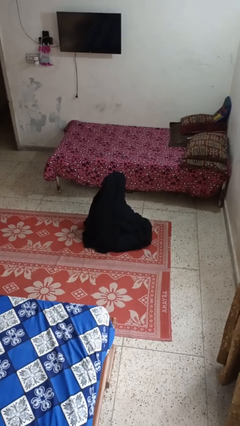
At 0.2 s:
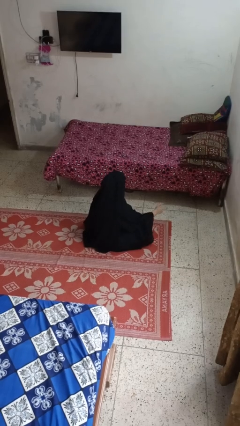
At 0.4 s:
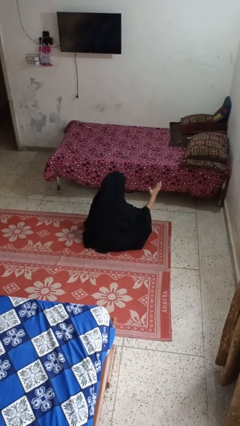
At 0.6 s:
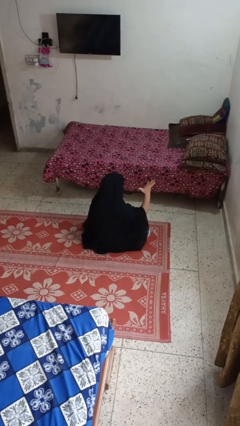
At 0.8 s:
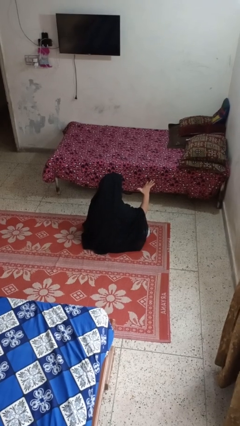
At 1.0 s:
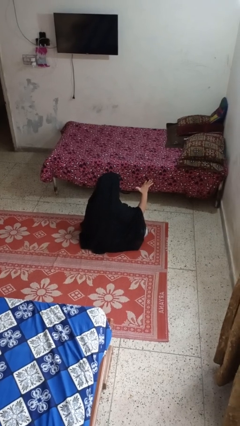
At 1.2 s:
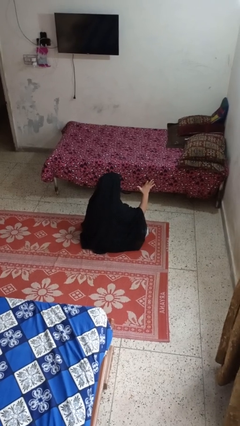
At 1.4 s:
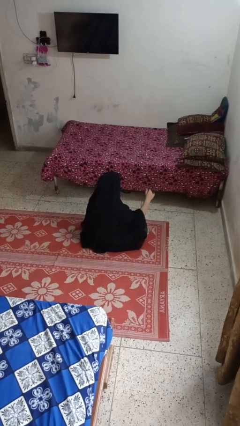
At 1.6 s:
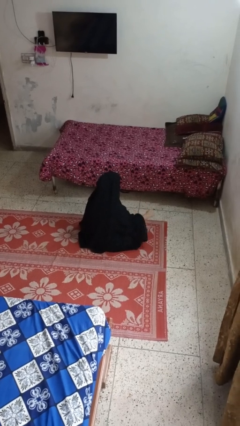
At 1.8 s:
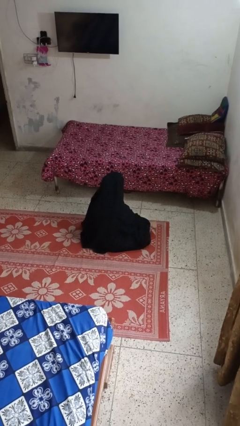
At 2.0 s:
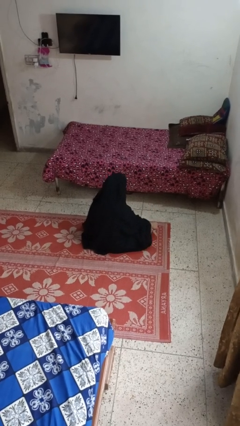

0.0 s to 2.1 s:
person gestures number five

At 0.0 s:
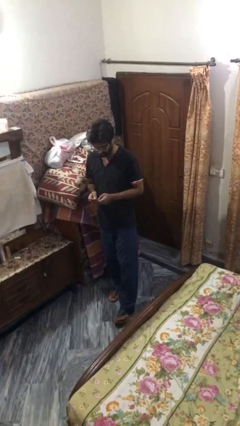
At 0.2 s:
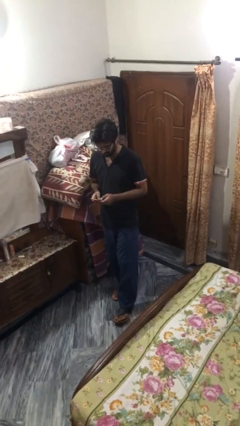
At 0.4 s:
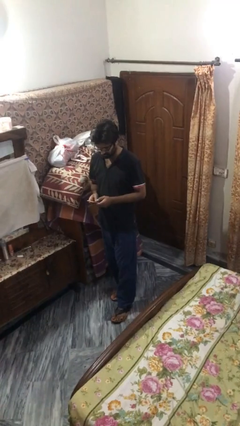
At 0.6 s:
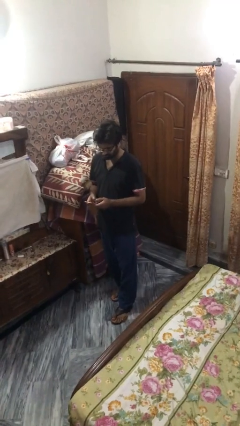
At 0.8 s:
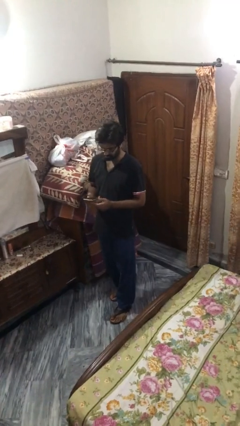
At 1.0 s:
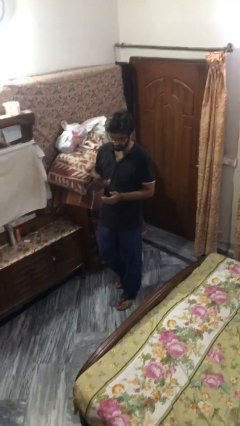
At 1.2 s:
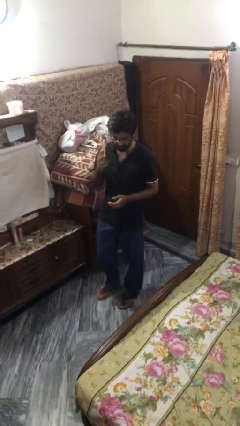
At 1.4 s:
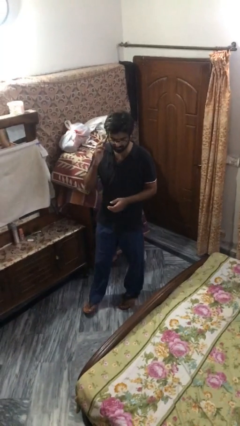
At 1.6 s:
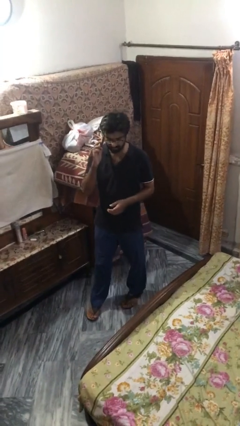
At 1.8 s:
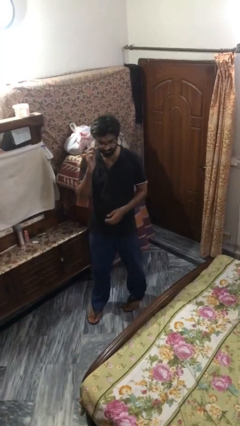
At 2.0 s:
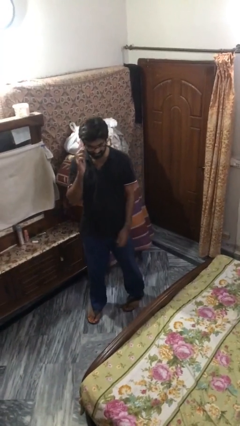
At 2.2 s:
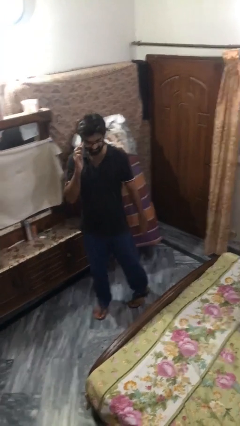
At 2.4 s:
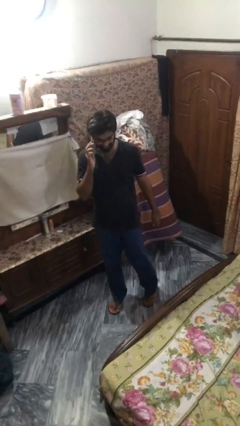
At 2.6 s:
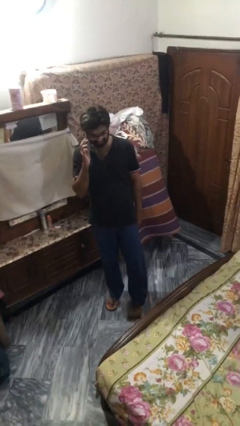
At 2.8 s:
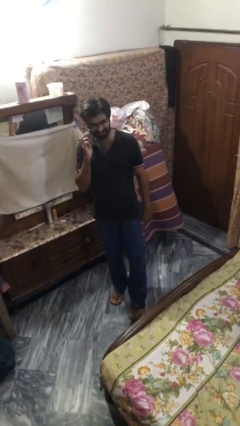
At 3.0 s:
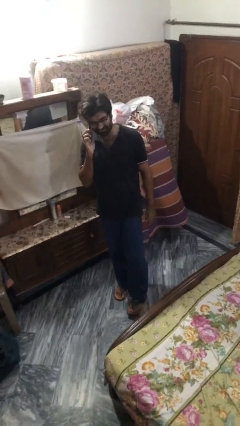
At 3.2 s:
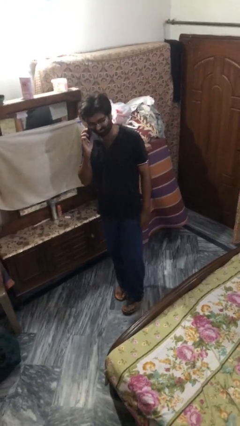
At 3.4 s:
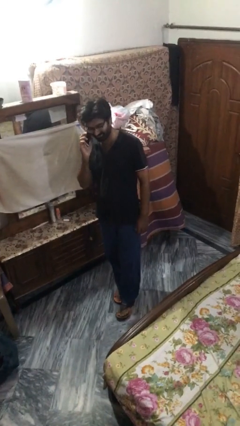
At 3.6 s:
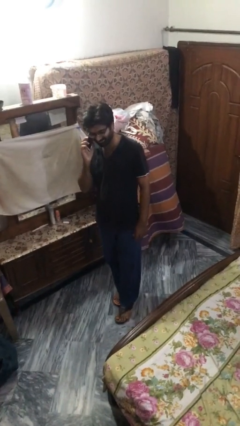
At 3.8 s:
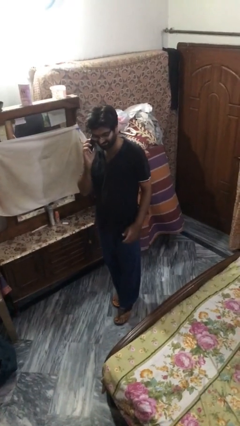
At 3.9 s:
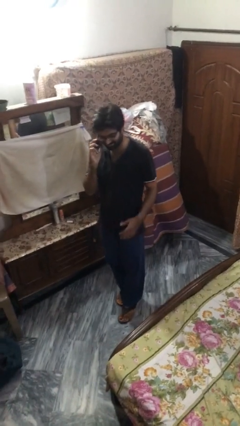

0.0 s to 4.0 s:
person talks on phone

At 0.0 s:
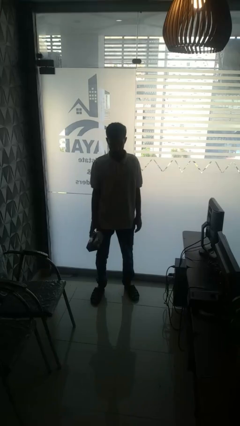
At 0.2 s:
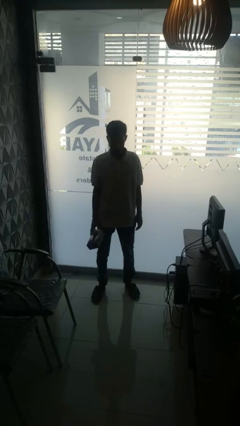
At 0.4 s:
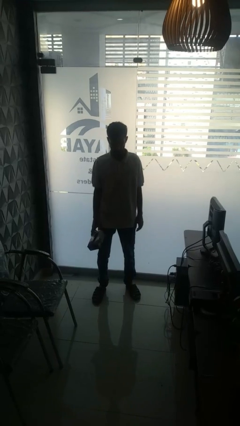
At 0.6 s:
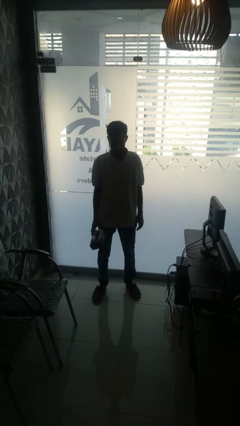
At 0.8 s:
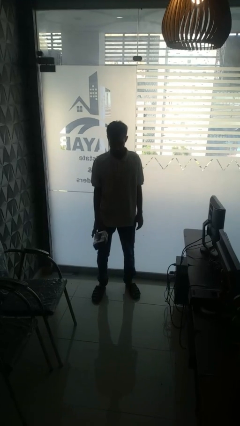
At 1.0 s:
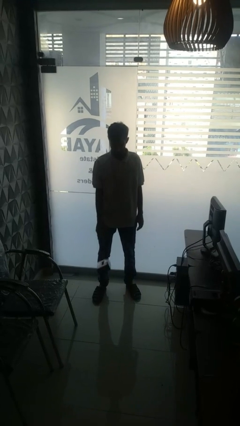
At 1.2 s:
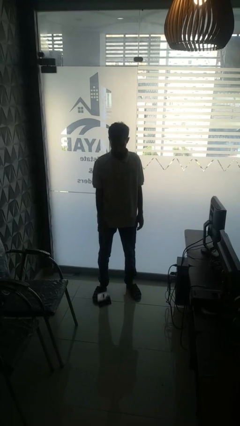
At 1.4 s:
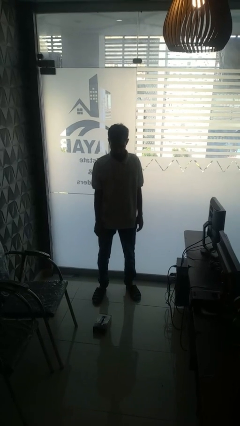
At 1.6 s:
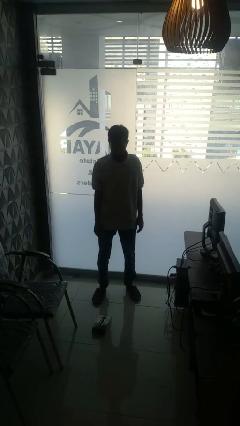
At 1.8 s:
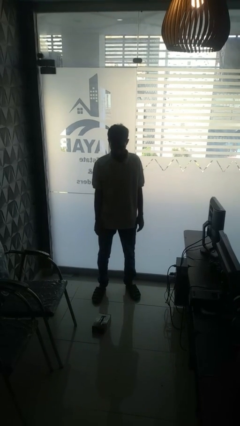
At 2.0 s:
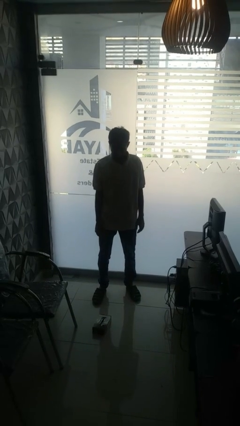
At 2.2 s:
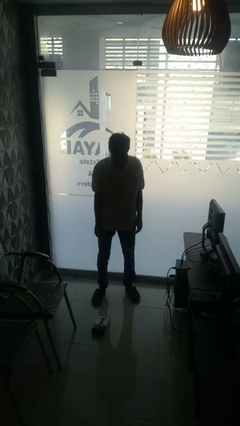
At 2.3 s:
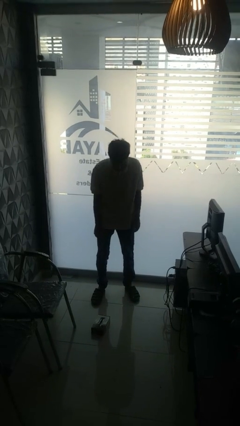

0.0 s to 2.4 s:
person throws object to ground

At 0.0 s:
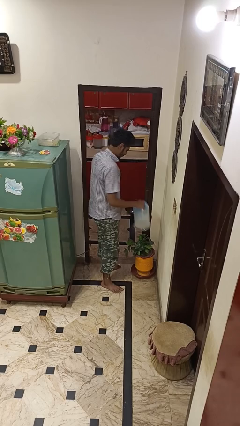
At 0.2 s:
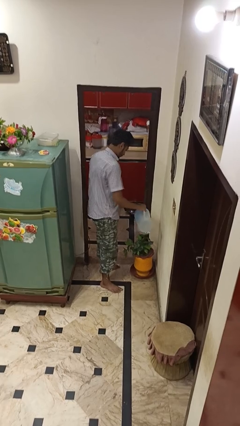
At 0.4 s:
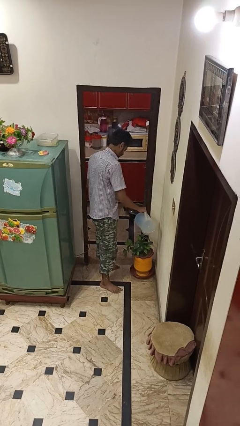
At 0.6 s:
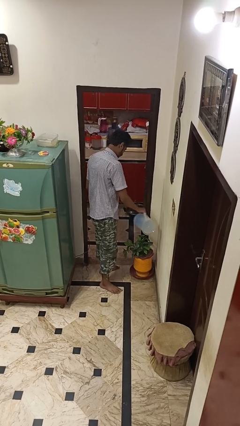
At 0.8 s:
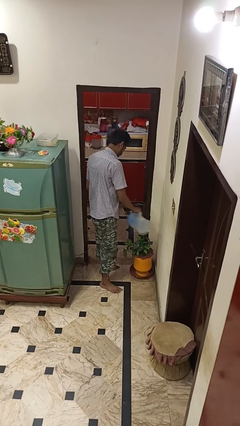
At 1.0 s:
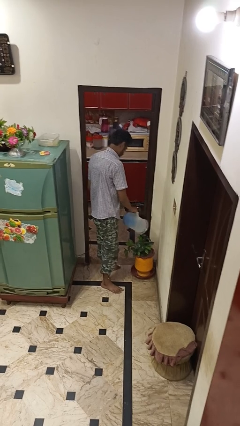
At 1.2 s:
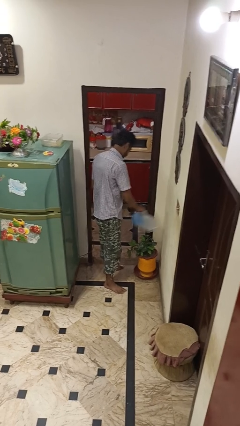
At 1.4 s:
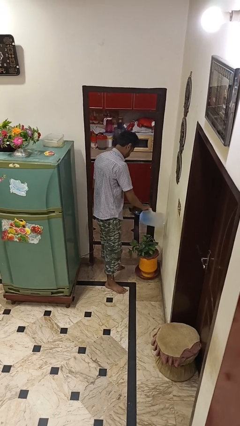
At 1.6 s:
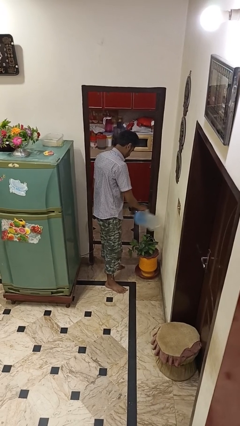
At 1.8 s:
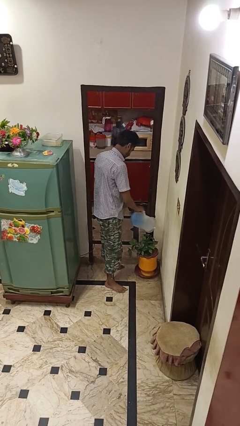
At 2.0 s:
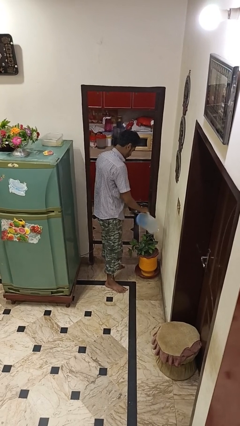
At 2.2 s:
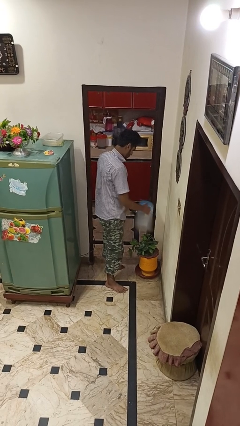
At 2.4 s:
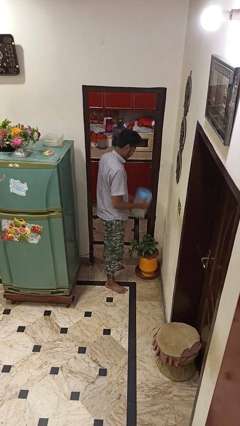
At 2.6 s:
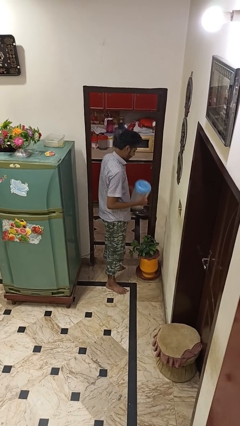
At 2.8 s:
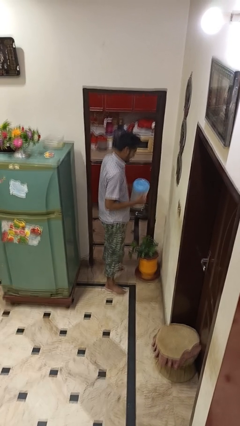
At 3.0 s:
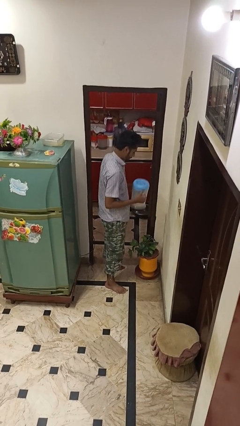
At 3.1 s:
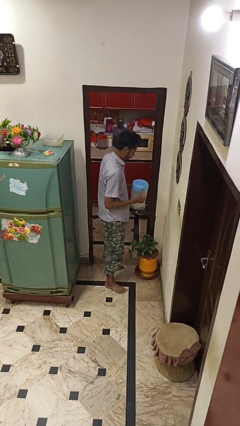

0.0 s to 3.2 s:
person waters houseplant

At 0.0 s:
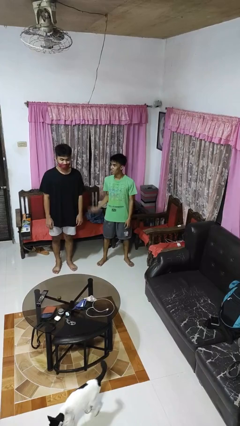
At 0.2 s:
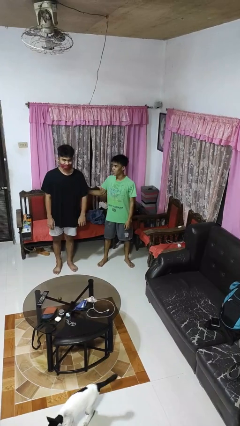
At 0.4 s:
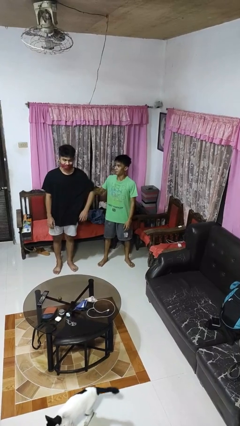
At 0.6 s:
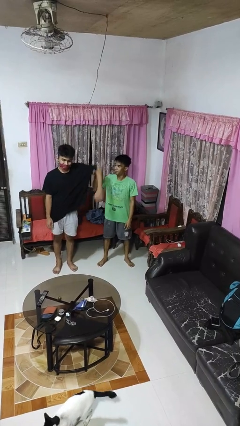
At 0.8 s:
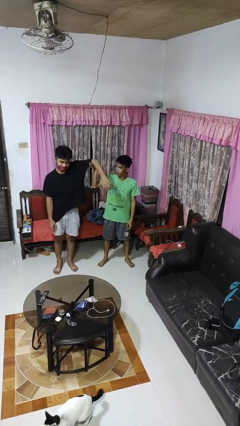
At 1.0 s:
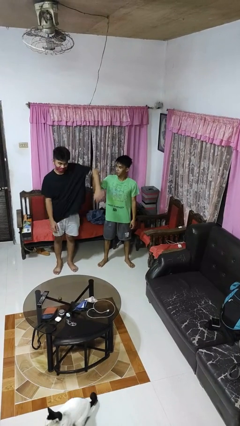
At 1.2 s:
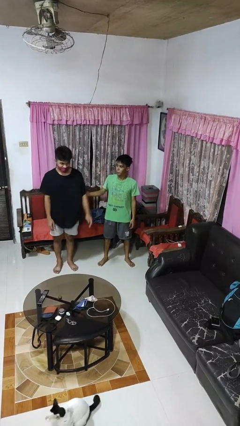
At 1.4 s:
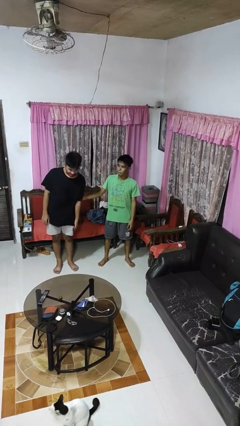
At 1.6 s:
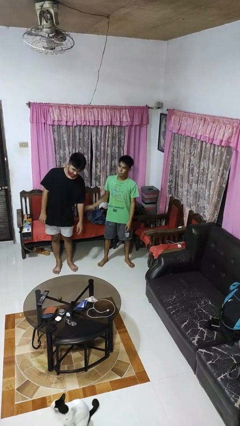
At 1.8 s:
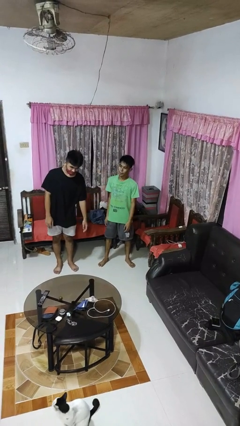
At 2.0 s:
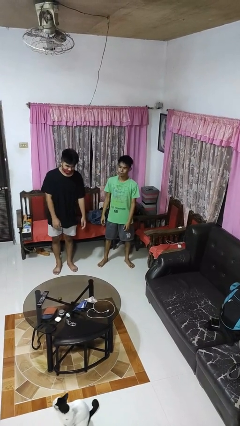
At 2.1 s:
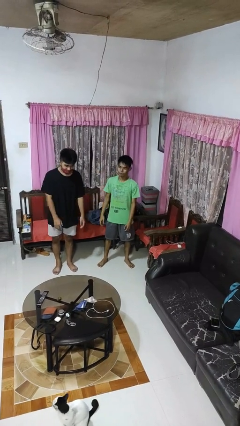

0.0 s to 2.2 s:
person grabs person by bicep

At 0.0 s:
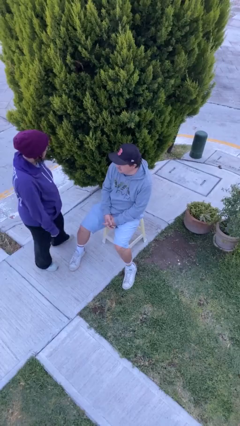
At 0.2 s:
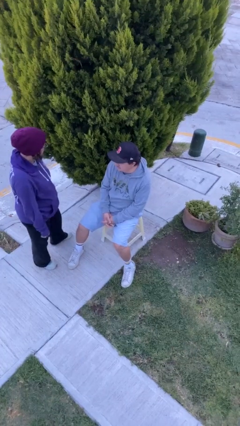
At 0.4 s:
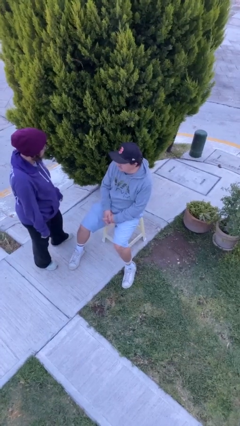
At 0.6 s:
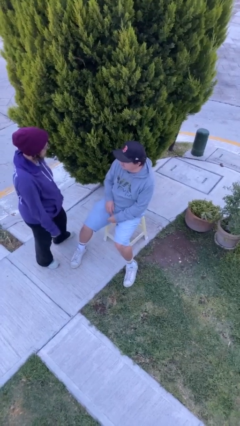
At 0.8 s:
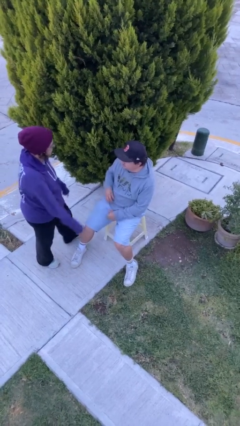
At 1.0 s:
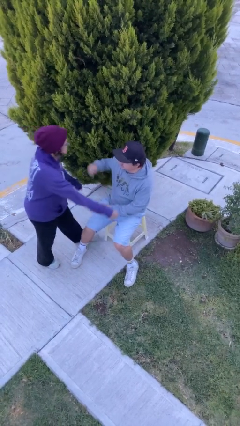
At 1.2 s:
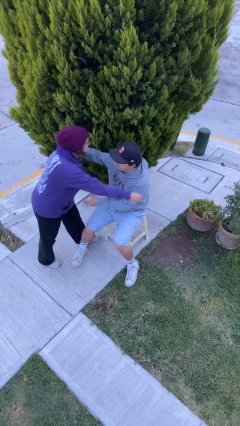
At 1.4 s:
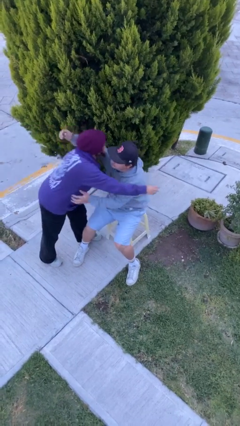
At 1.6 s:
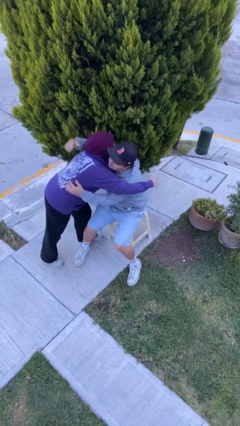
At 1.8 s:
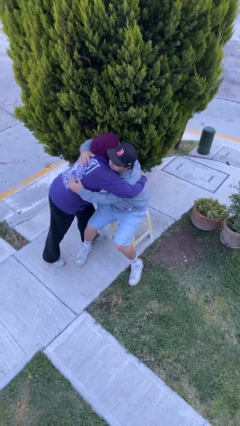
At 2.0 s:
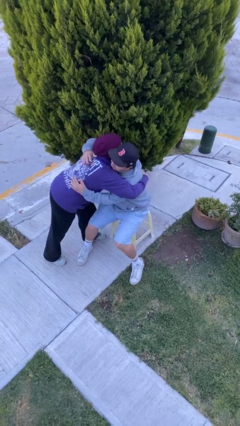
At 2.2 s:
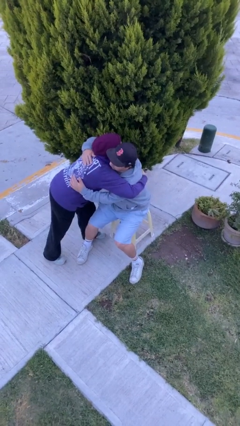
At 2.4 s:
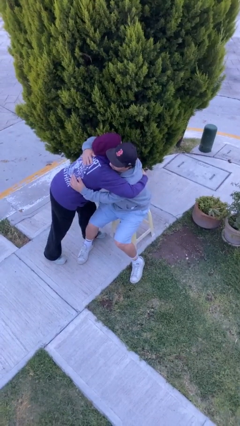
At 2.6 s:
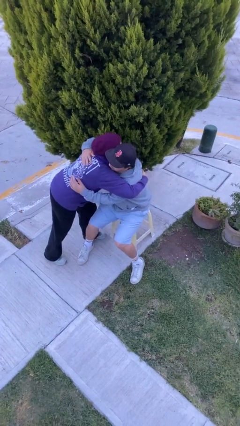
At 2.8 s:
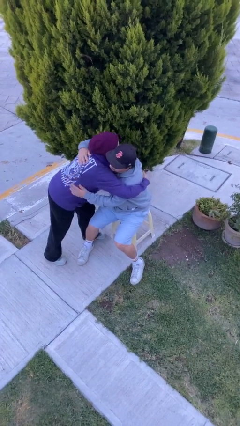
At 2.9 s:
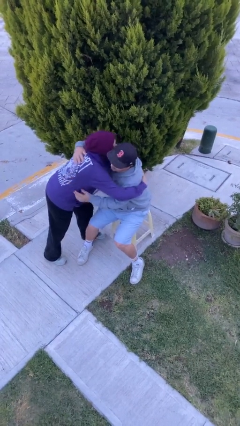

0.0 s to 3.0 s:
person embraces person

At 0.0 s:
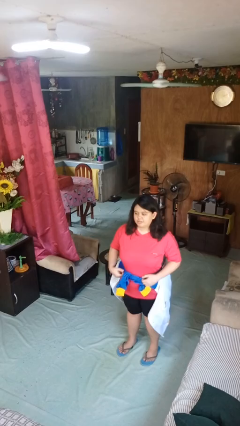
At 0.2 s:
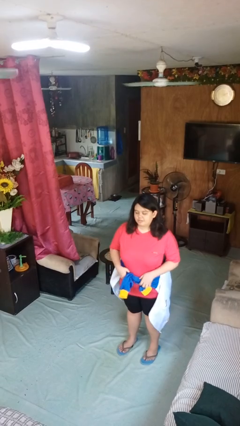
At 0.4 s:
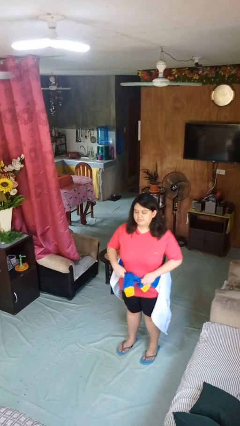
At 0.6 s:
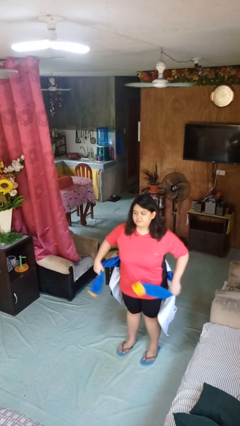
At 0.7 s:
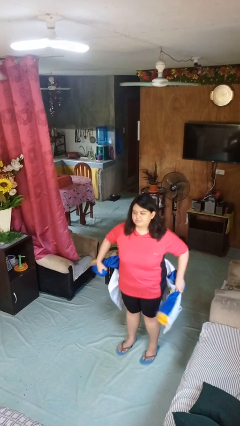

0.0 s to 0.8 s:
person unties jacket around waist
